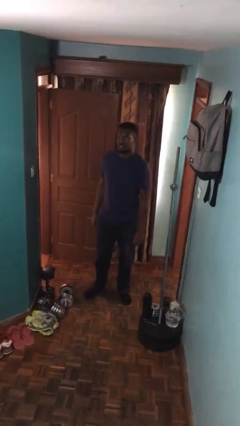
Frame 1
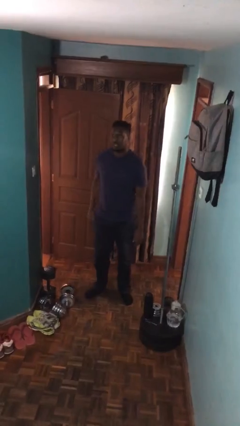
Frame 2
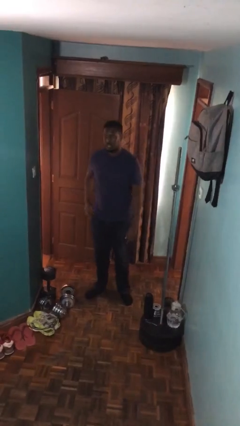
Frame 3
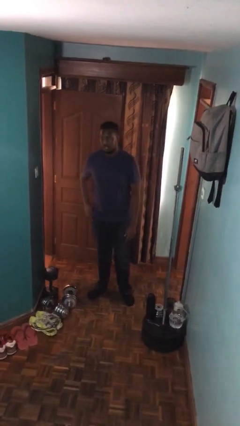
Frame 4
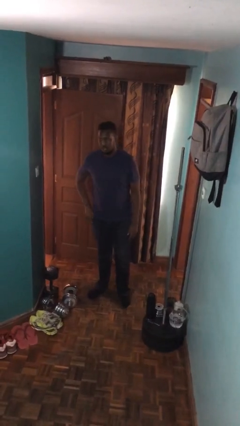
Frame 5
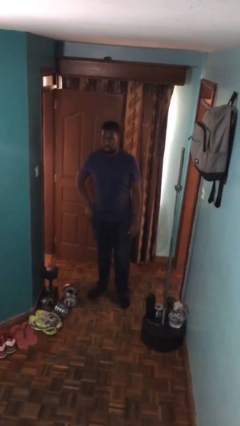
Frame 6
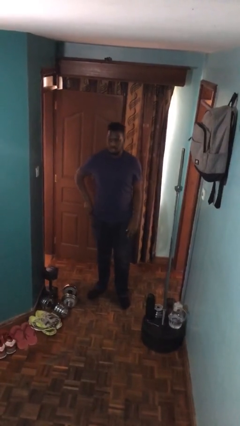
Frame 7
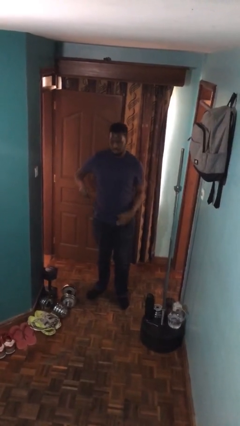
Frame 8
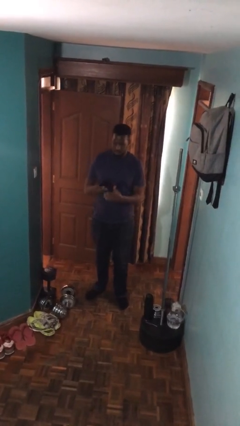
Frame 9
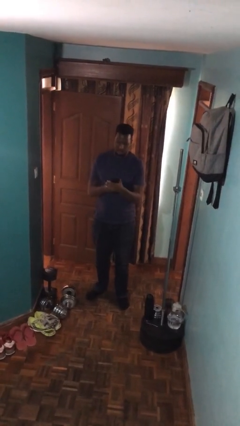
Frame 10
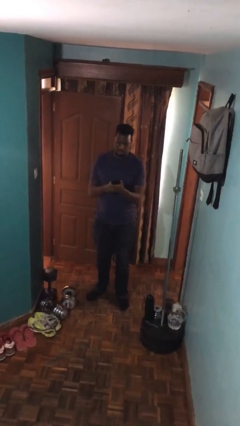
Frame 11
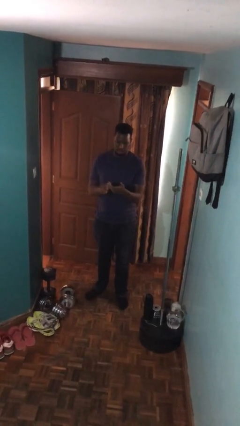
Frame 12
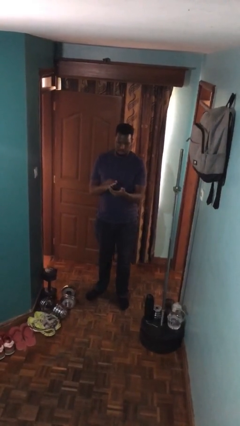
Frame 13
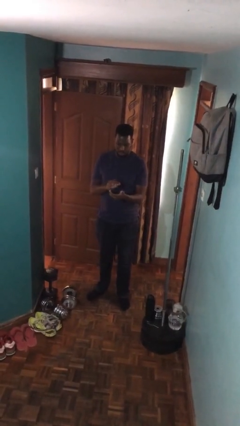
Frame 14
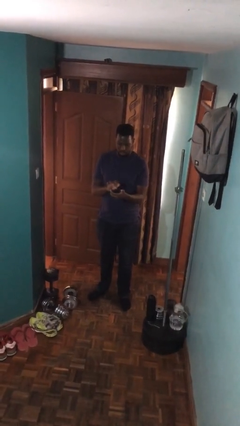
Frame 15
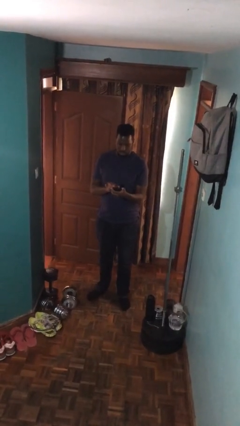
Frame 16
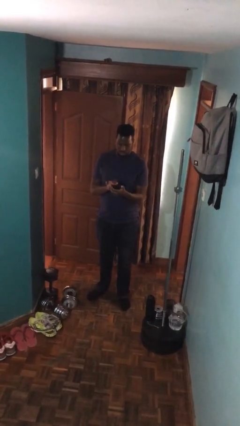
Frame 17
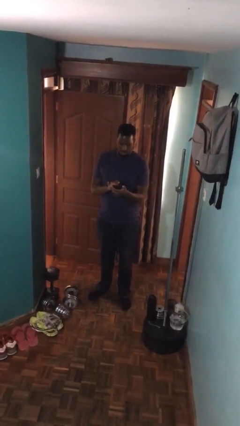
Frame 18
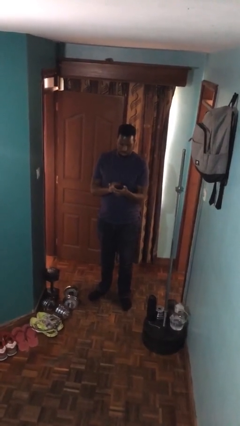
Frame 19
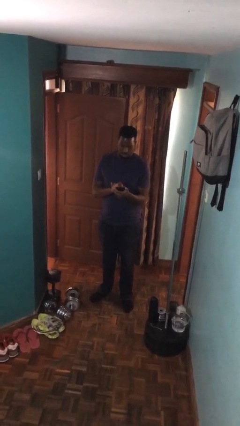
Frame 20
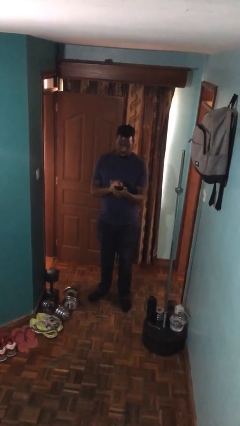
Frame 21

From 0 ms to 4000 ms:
person takes phone from pocket

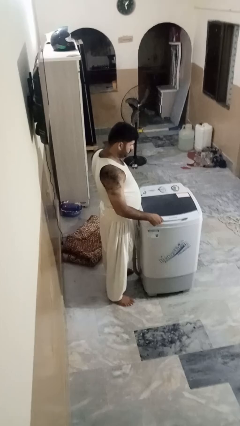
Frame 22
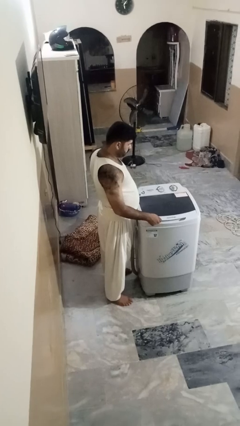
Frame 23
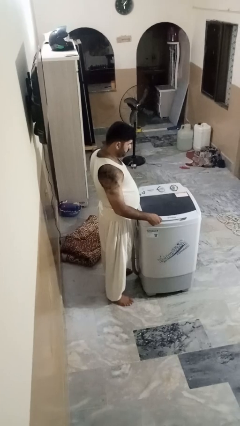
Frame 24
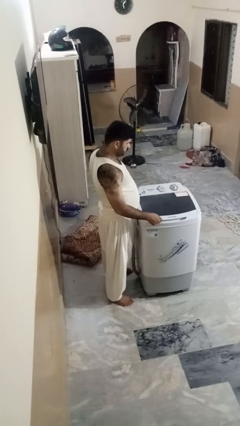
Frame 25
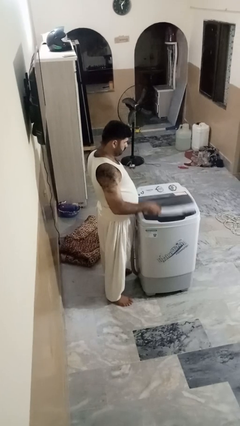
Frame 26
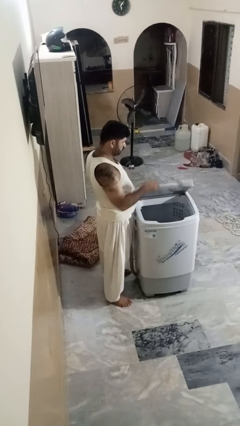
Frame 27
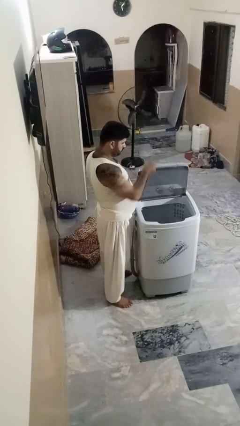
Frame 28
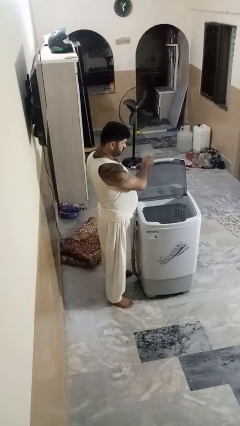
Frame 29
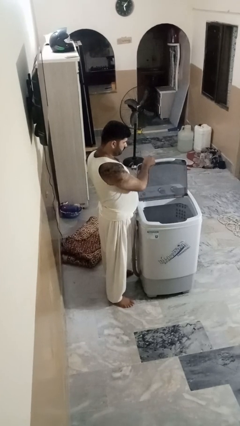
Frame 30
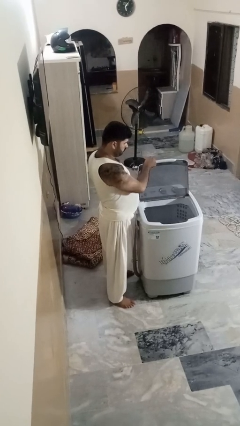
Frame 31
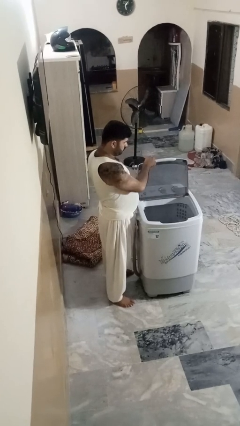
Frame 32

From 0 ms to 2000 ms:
person opens clothes washer

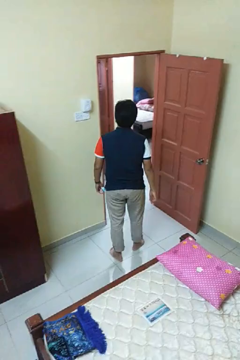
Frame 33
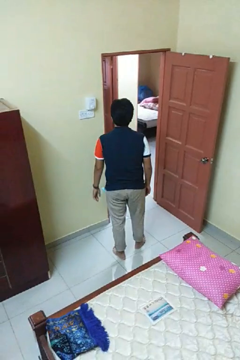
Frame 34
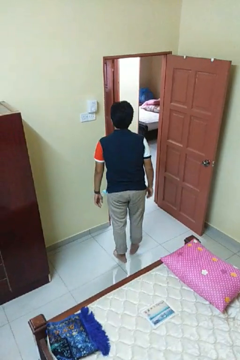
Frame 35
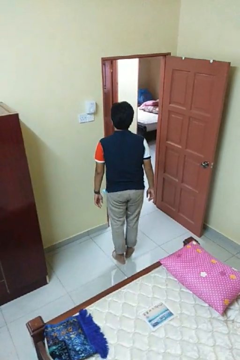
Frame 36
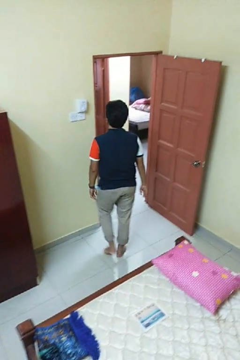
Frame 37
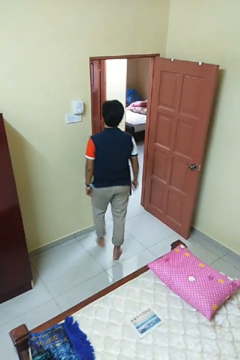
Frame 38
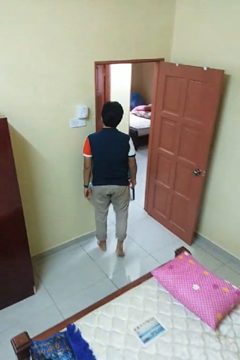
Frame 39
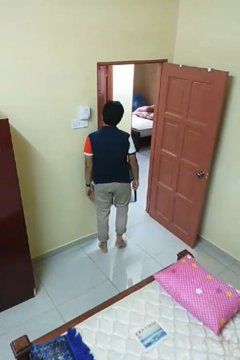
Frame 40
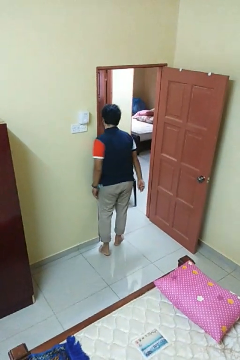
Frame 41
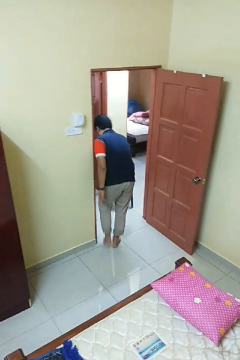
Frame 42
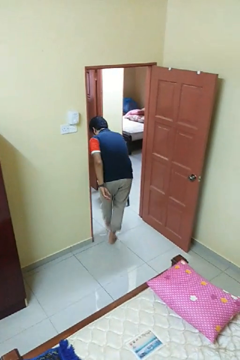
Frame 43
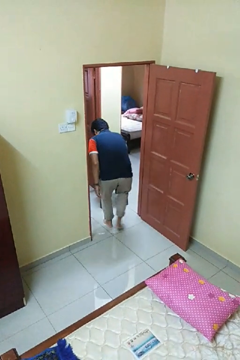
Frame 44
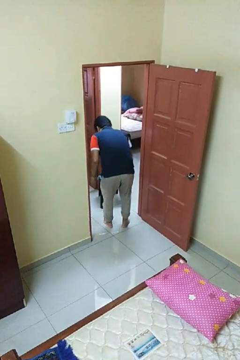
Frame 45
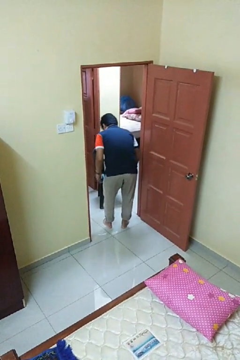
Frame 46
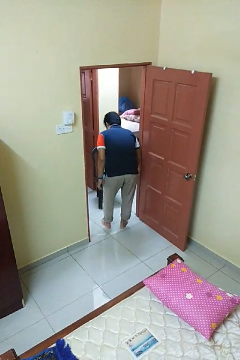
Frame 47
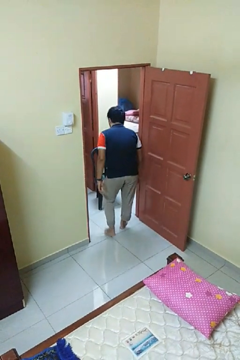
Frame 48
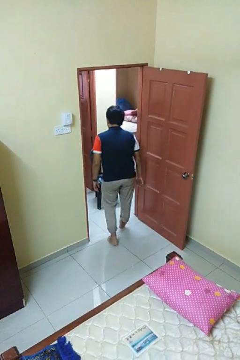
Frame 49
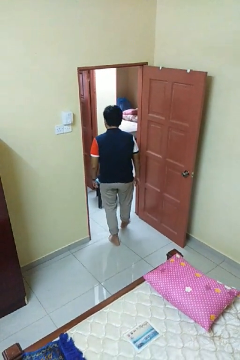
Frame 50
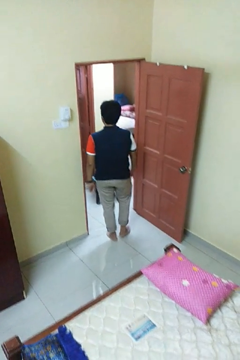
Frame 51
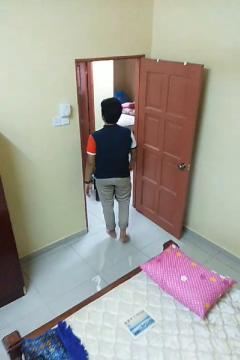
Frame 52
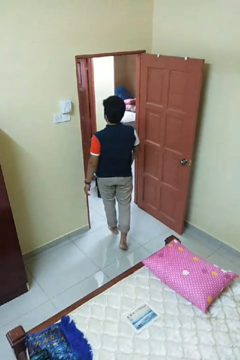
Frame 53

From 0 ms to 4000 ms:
person bumps into wall

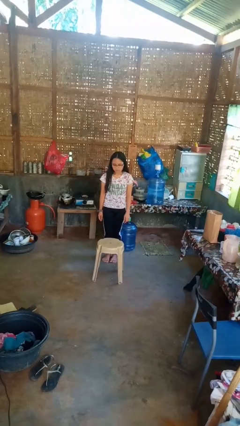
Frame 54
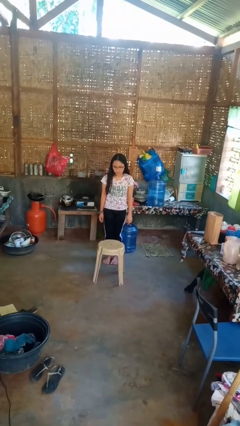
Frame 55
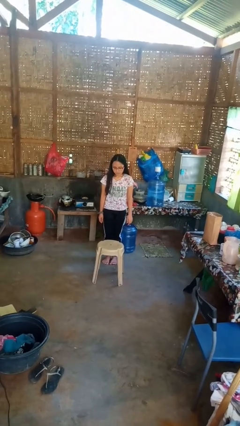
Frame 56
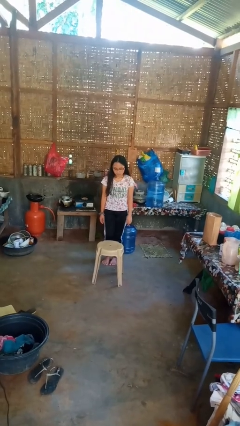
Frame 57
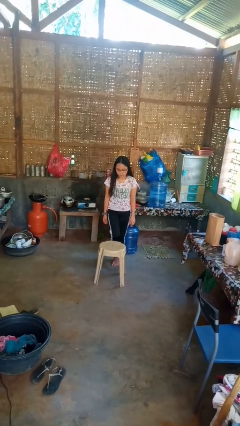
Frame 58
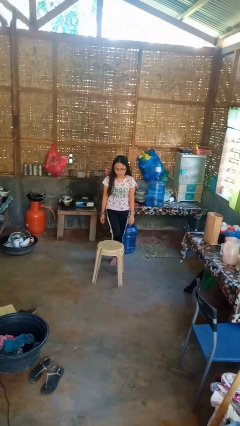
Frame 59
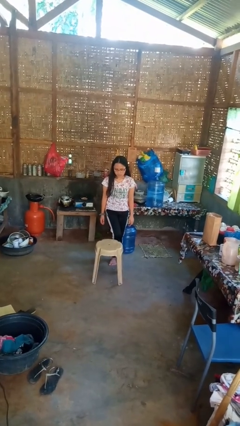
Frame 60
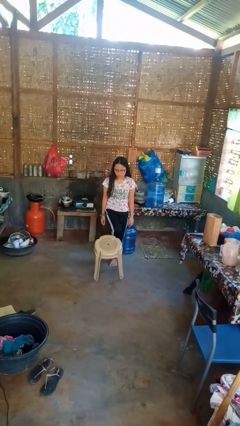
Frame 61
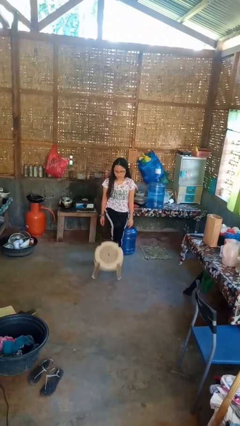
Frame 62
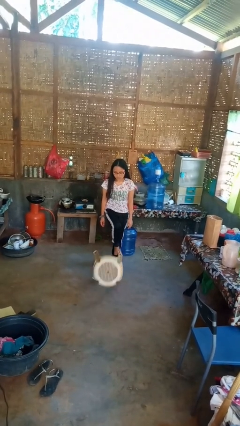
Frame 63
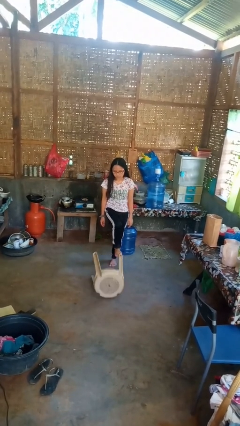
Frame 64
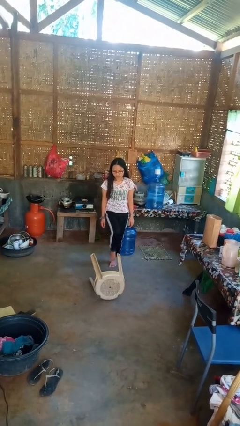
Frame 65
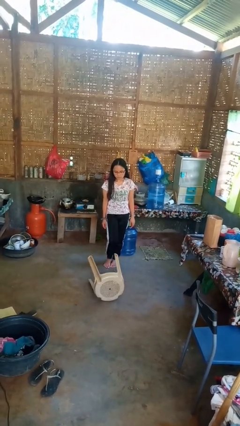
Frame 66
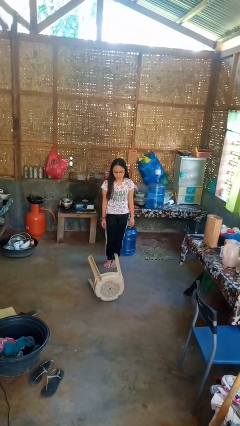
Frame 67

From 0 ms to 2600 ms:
person knocks over furniture

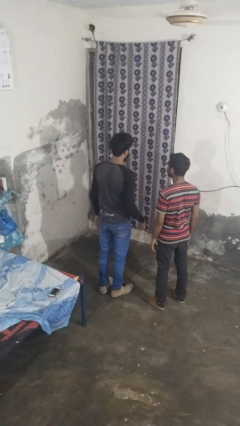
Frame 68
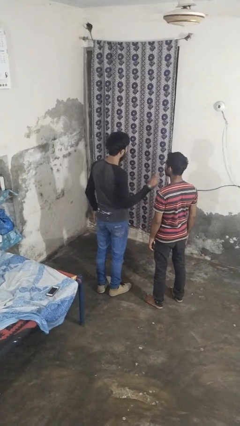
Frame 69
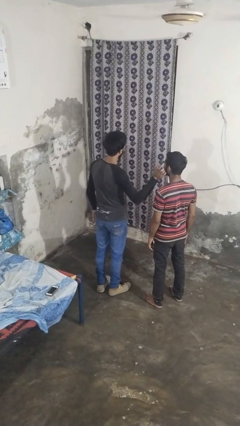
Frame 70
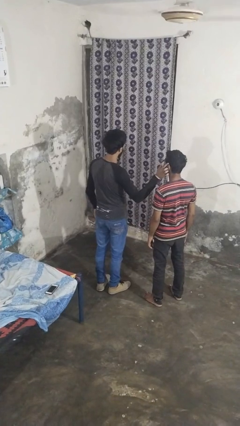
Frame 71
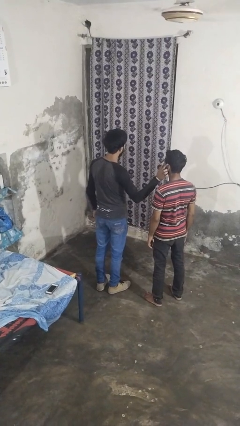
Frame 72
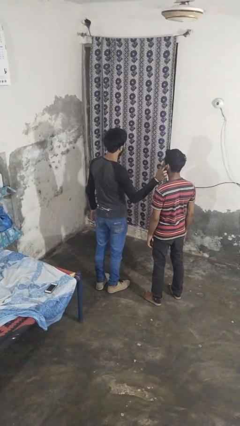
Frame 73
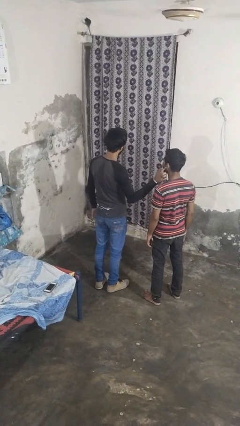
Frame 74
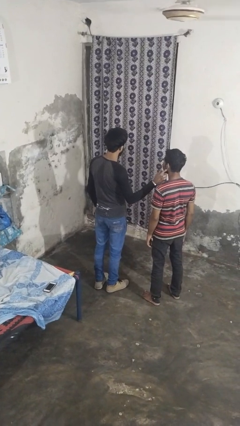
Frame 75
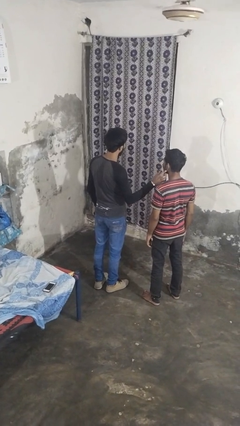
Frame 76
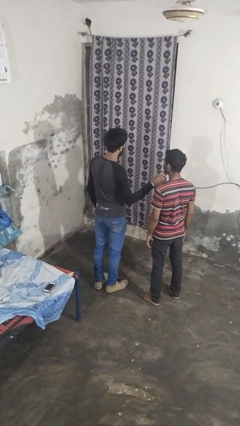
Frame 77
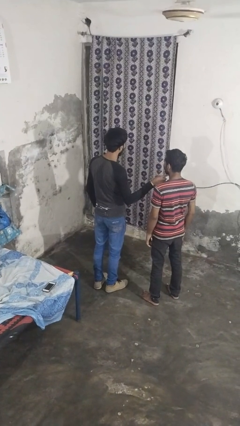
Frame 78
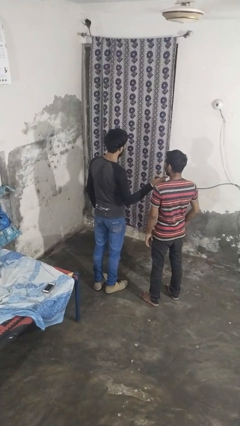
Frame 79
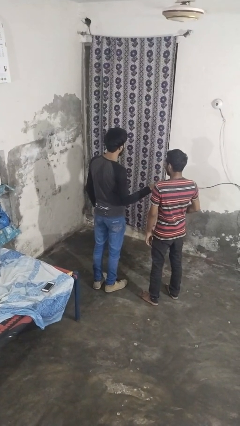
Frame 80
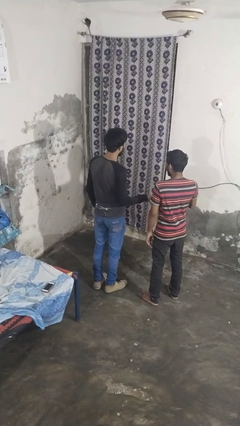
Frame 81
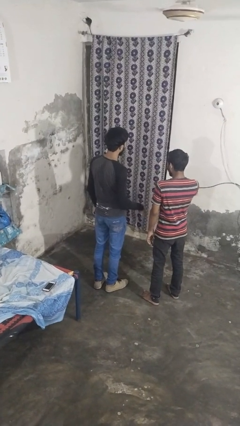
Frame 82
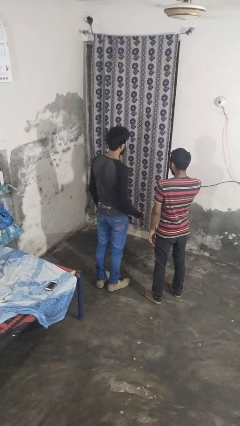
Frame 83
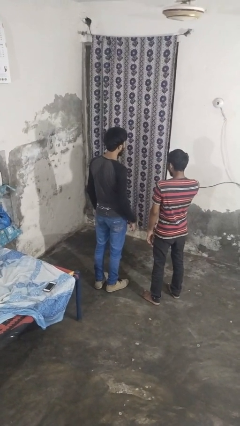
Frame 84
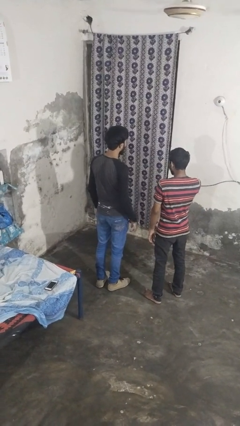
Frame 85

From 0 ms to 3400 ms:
person touches face of person

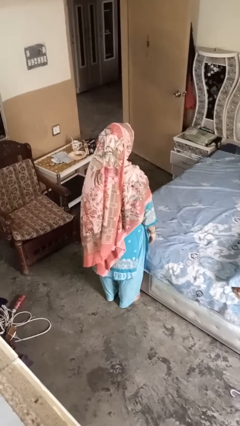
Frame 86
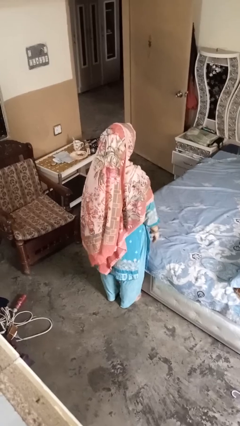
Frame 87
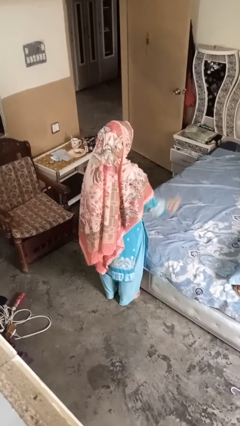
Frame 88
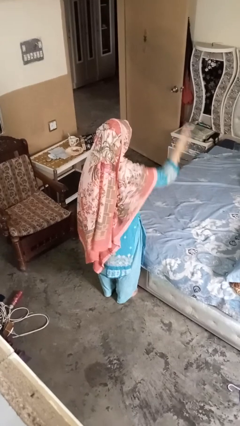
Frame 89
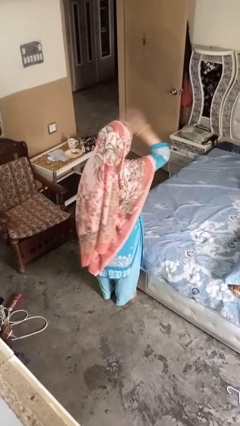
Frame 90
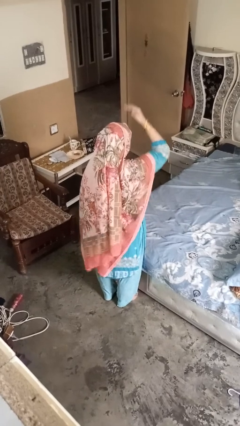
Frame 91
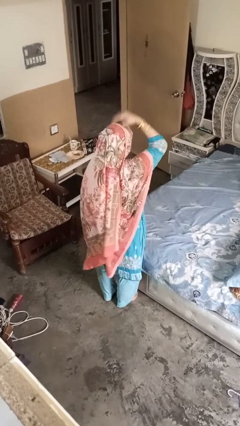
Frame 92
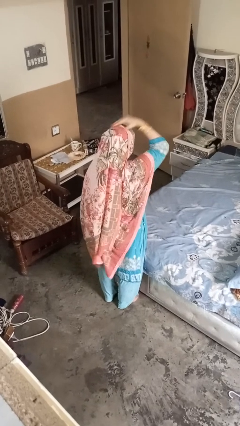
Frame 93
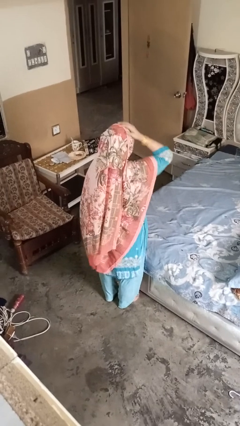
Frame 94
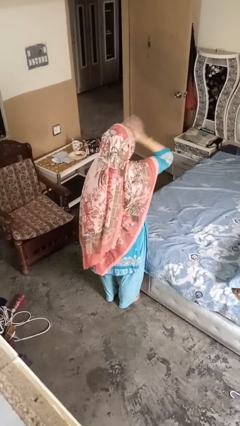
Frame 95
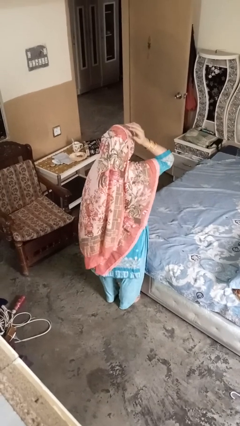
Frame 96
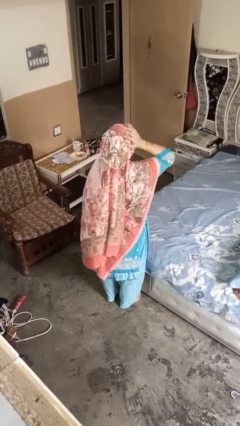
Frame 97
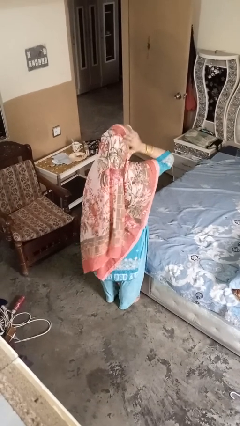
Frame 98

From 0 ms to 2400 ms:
person pats head
